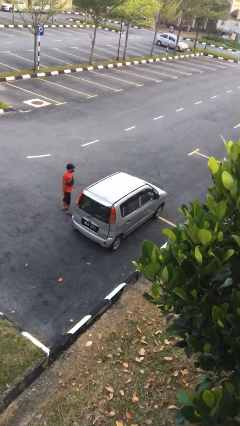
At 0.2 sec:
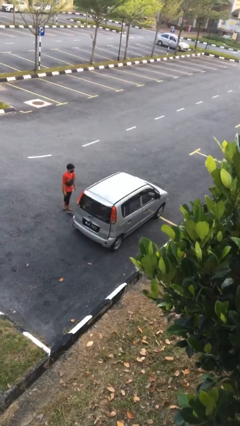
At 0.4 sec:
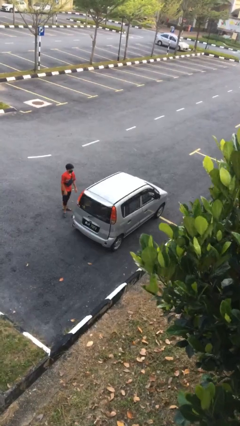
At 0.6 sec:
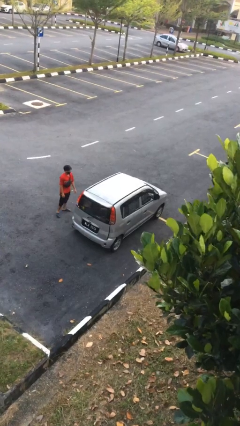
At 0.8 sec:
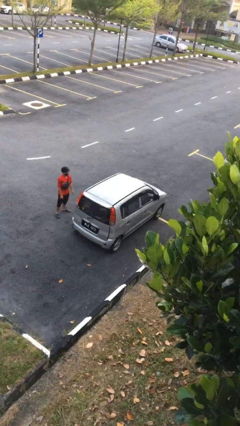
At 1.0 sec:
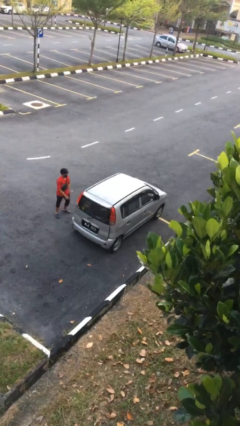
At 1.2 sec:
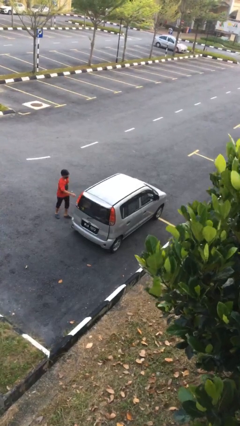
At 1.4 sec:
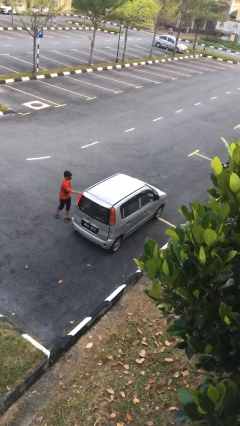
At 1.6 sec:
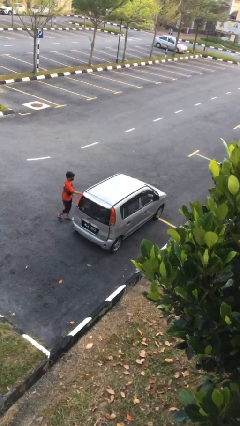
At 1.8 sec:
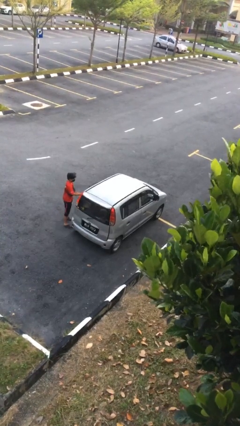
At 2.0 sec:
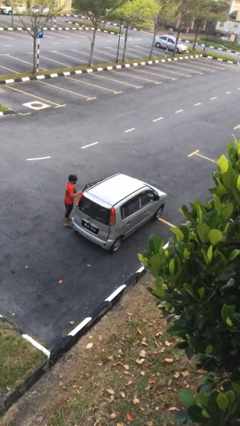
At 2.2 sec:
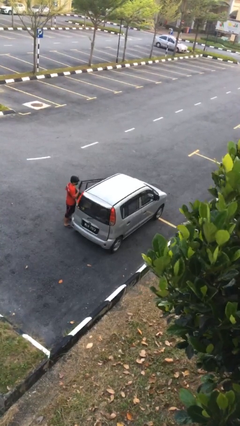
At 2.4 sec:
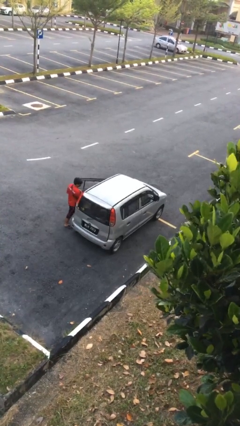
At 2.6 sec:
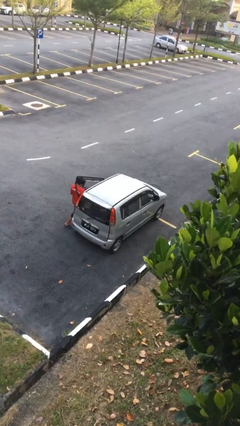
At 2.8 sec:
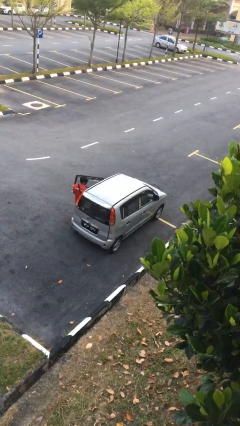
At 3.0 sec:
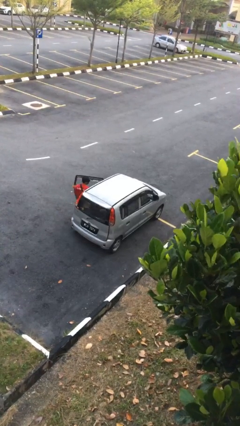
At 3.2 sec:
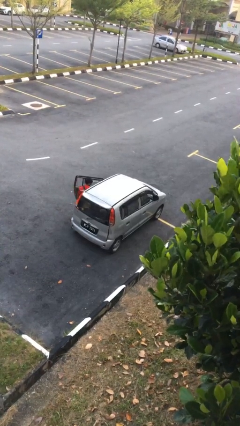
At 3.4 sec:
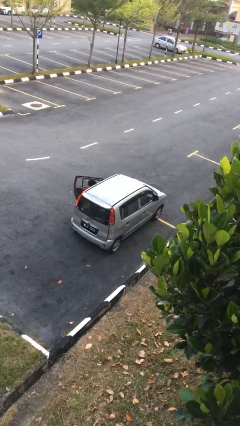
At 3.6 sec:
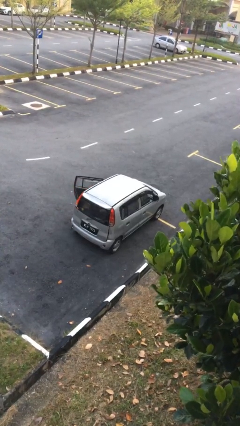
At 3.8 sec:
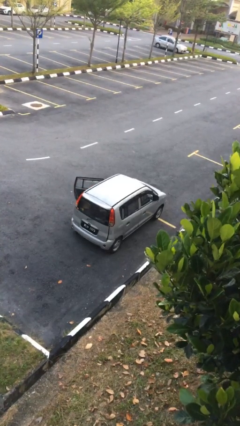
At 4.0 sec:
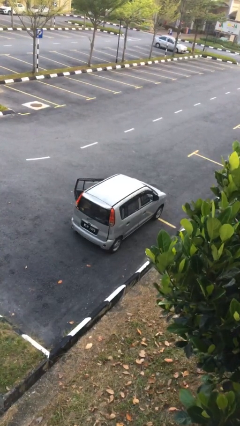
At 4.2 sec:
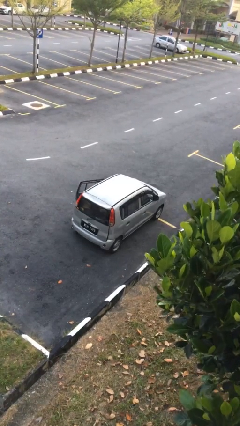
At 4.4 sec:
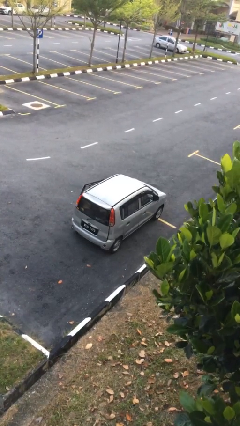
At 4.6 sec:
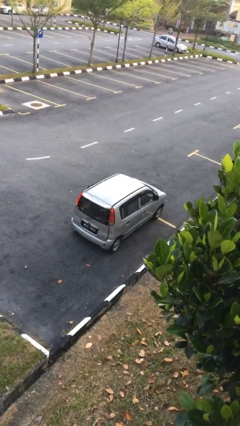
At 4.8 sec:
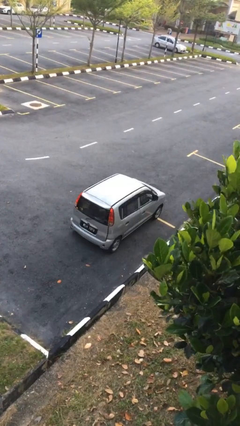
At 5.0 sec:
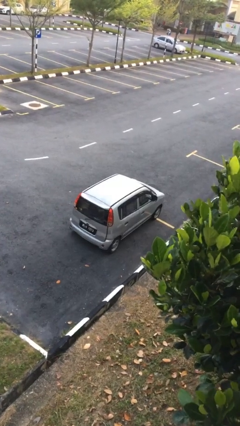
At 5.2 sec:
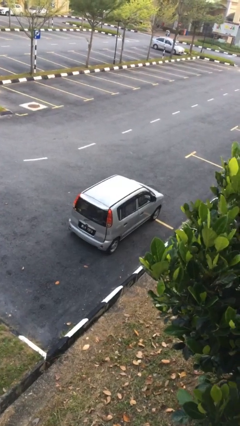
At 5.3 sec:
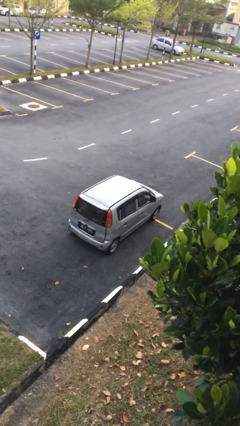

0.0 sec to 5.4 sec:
car picks up person

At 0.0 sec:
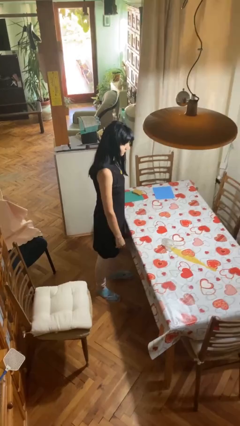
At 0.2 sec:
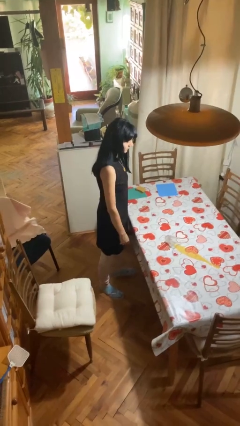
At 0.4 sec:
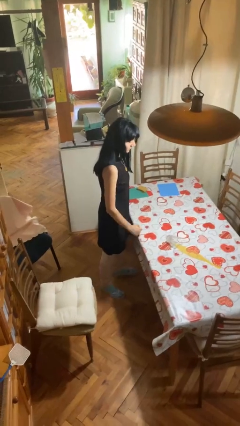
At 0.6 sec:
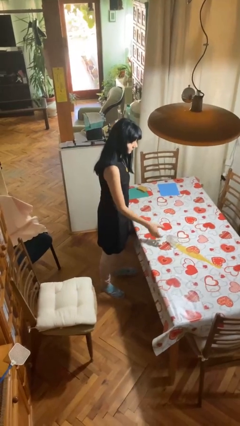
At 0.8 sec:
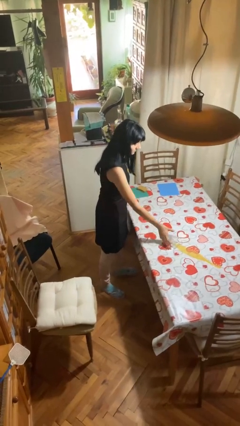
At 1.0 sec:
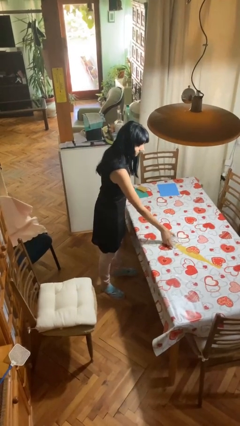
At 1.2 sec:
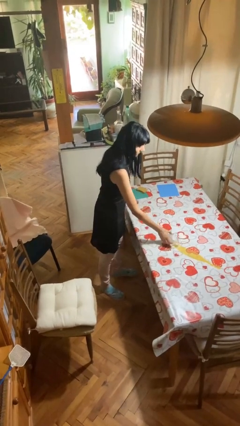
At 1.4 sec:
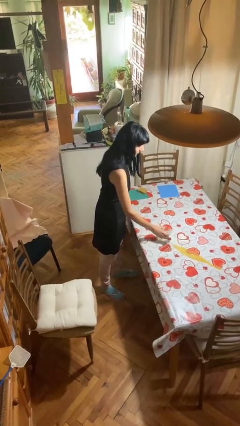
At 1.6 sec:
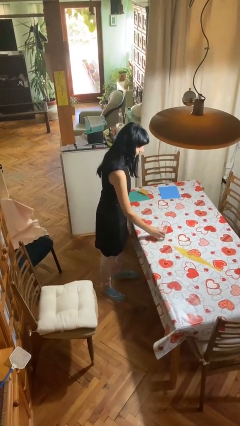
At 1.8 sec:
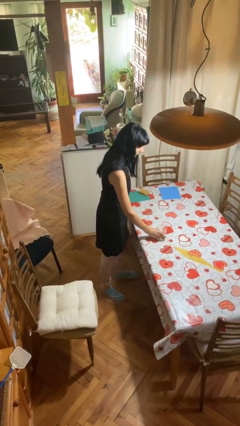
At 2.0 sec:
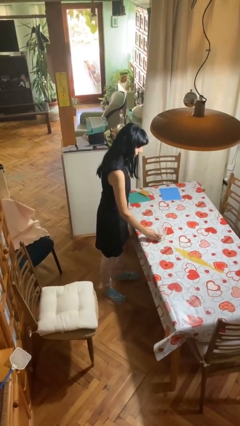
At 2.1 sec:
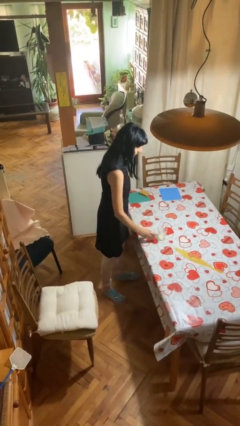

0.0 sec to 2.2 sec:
person sets upright glass

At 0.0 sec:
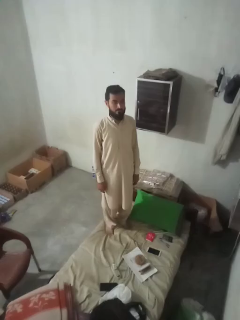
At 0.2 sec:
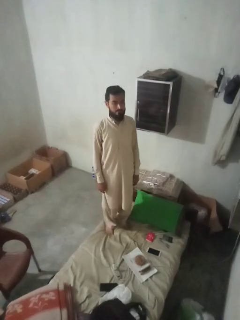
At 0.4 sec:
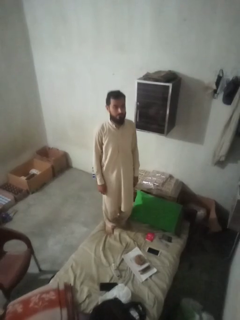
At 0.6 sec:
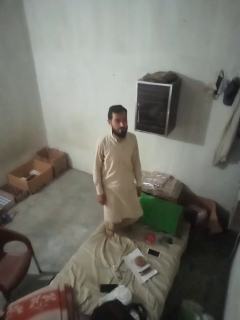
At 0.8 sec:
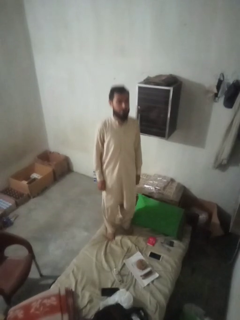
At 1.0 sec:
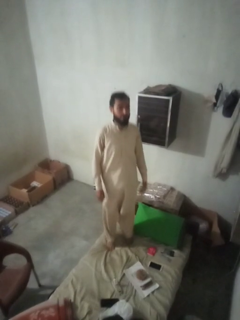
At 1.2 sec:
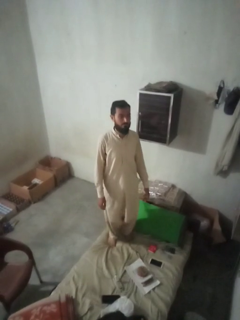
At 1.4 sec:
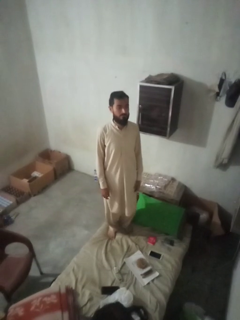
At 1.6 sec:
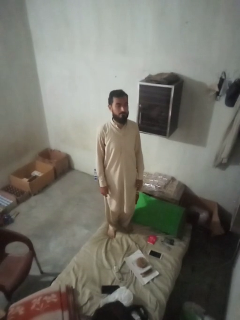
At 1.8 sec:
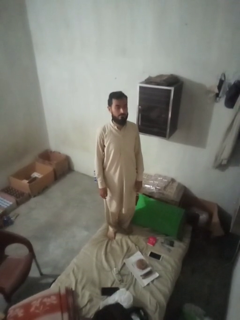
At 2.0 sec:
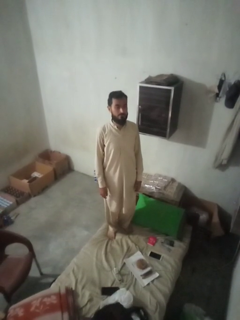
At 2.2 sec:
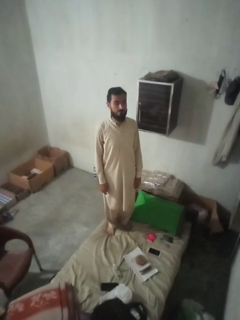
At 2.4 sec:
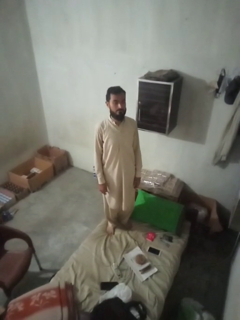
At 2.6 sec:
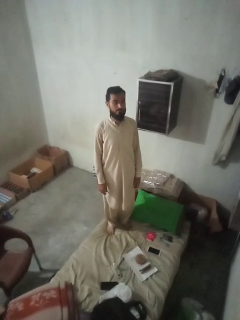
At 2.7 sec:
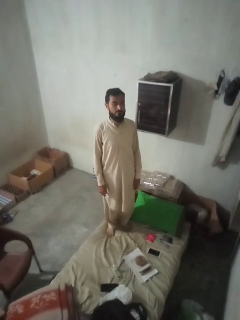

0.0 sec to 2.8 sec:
person jumps on bed

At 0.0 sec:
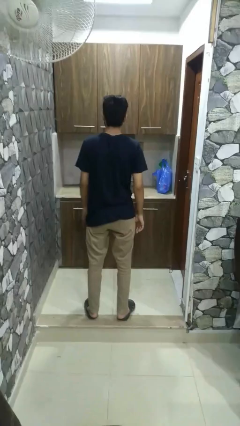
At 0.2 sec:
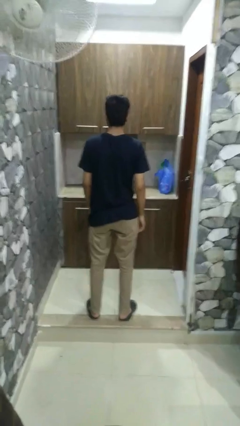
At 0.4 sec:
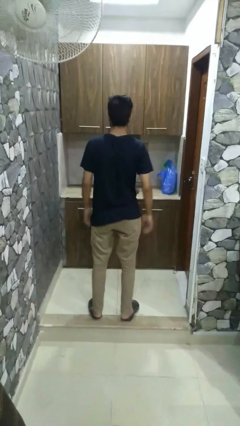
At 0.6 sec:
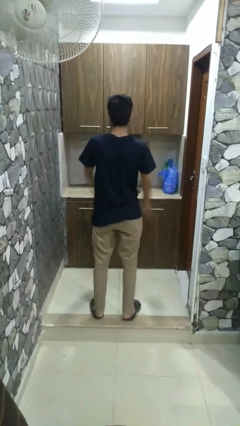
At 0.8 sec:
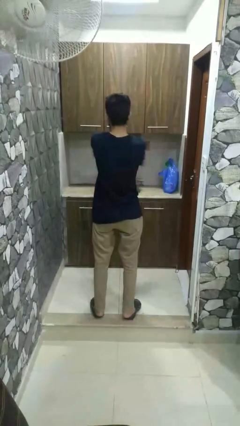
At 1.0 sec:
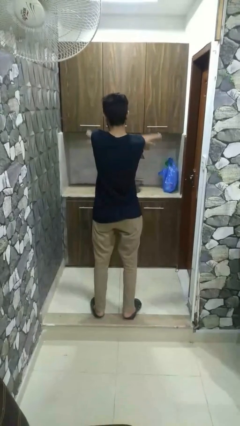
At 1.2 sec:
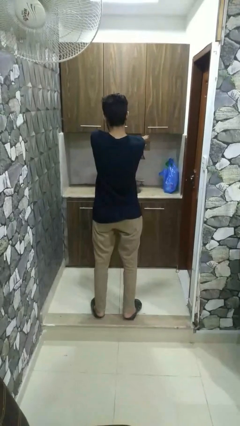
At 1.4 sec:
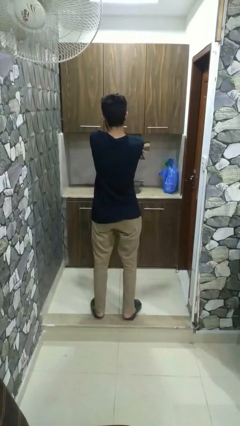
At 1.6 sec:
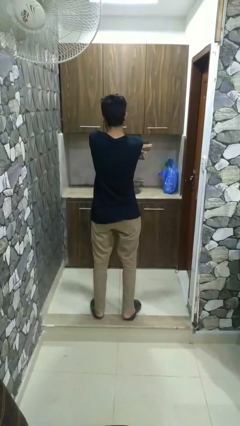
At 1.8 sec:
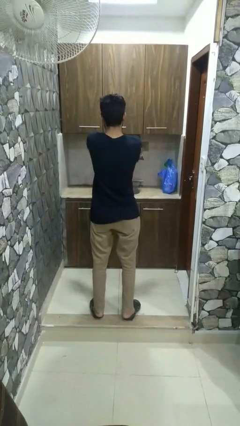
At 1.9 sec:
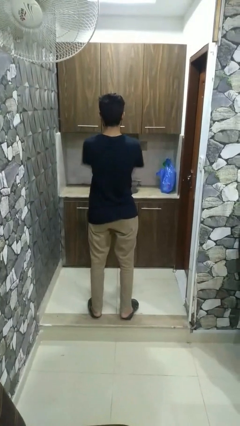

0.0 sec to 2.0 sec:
person crosses arms

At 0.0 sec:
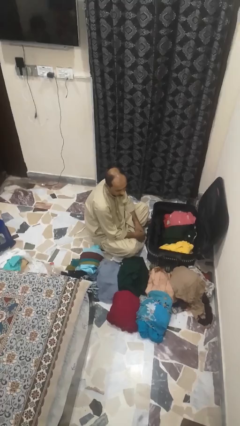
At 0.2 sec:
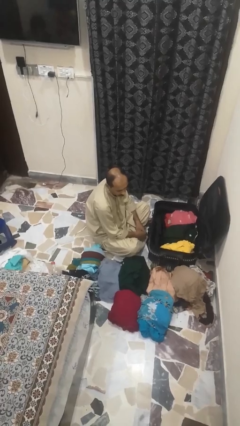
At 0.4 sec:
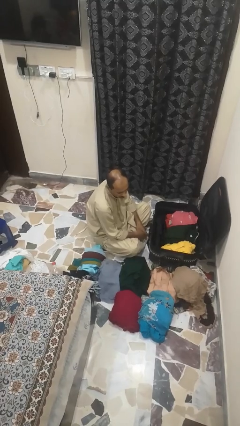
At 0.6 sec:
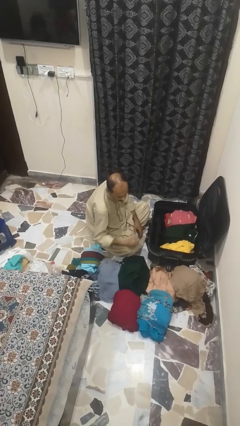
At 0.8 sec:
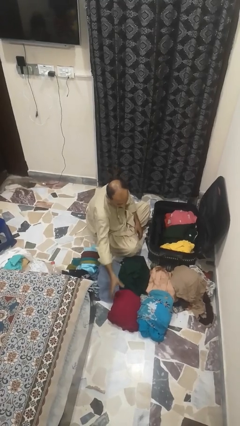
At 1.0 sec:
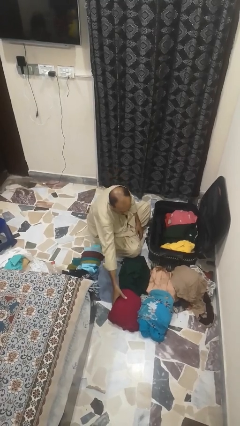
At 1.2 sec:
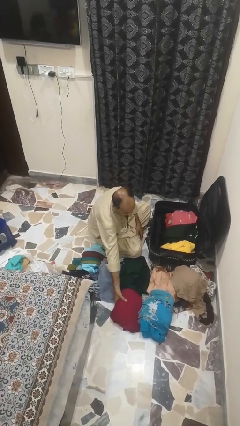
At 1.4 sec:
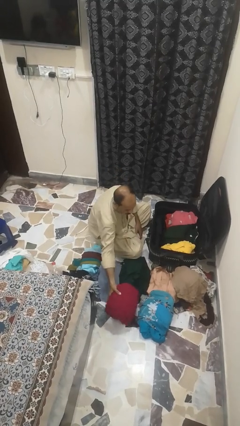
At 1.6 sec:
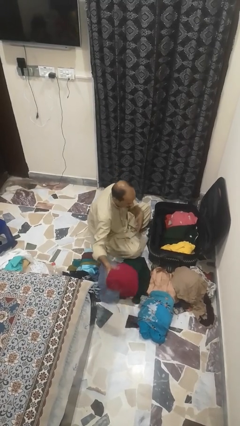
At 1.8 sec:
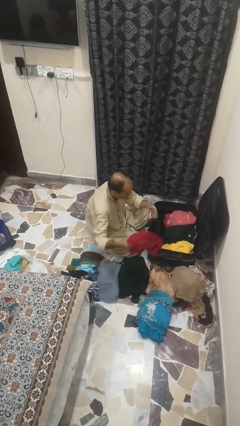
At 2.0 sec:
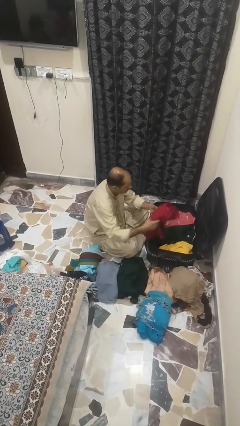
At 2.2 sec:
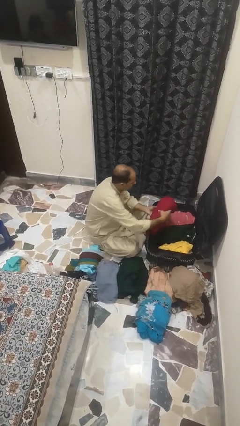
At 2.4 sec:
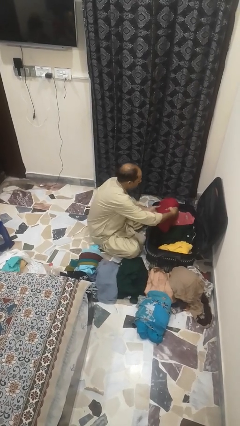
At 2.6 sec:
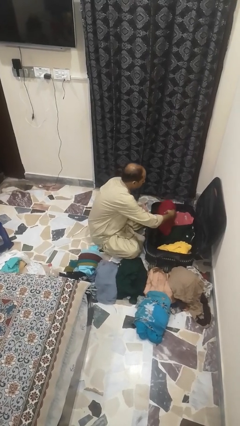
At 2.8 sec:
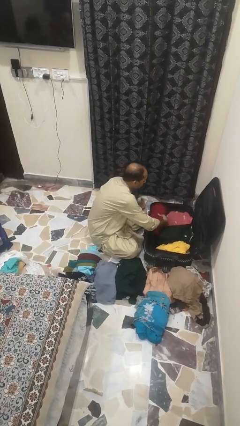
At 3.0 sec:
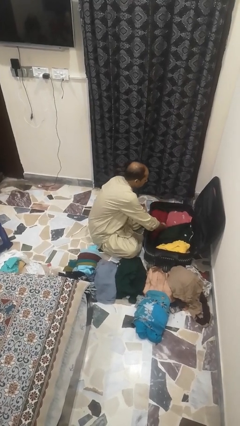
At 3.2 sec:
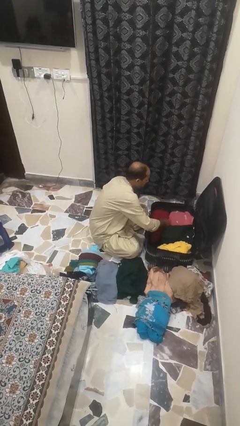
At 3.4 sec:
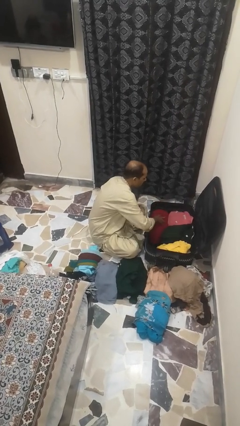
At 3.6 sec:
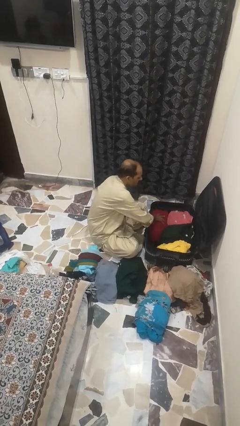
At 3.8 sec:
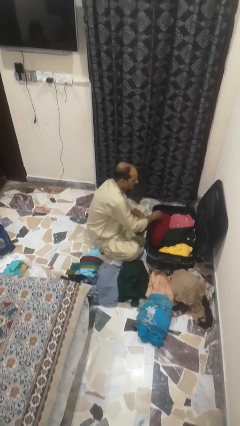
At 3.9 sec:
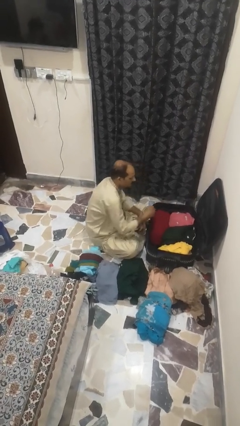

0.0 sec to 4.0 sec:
person loads clothes into suitcase

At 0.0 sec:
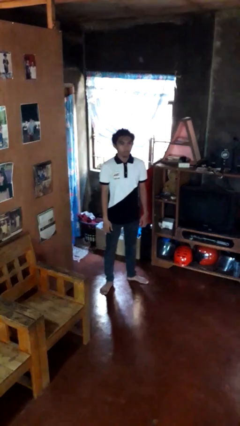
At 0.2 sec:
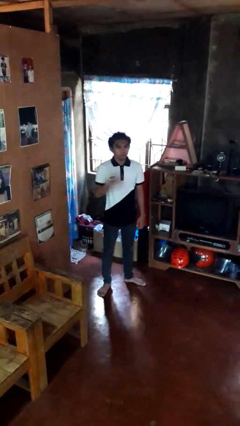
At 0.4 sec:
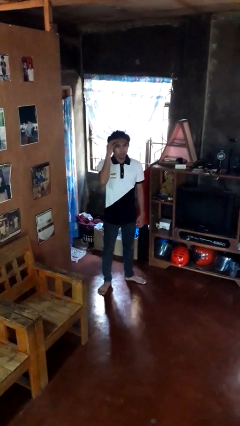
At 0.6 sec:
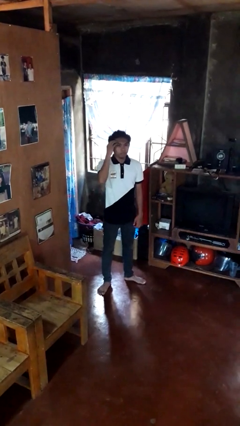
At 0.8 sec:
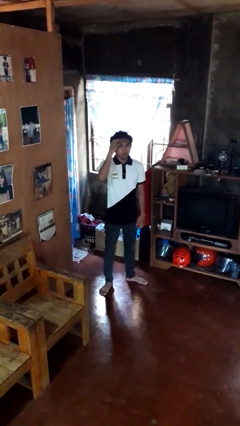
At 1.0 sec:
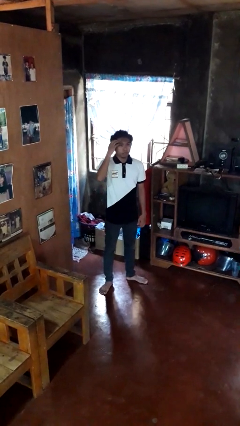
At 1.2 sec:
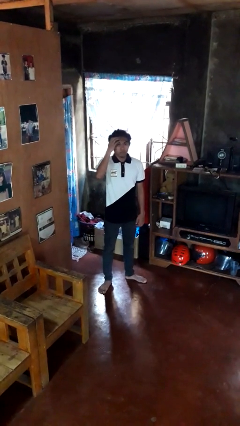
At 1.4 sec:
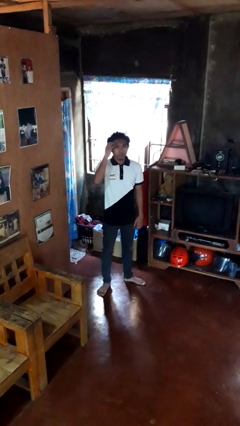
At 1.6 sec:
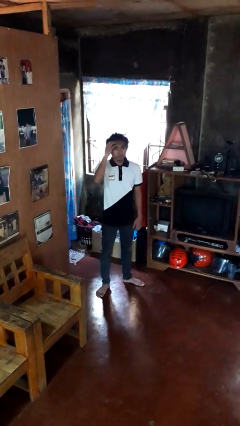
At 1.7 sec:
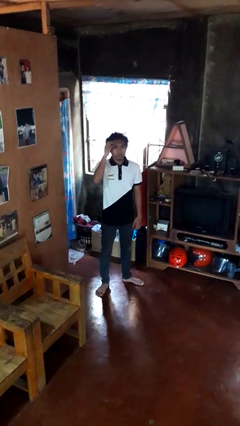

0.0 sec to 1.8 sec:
person scratches face
